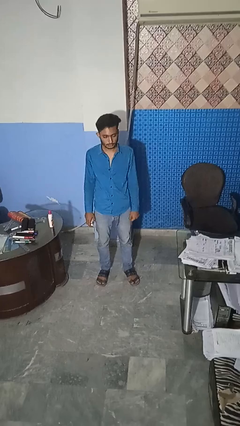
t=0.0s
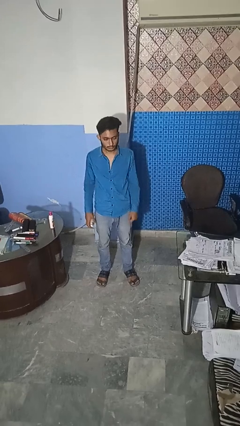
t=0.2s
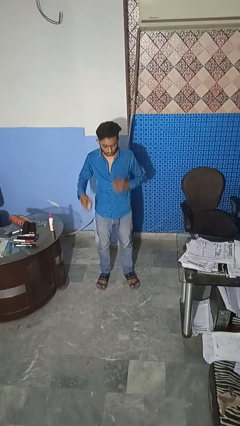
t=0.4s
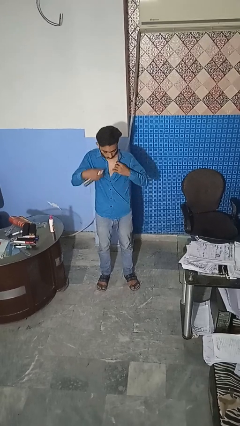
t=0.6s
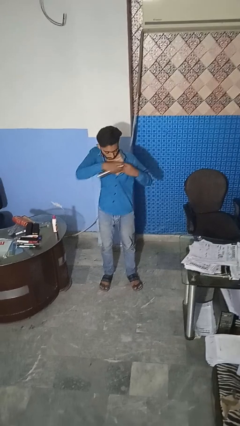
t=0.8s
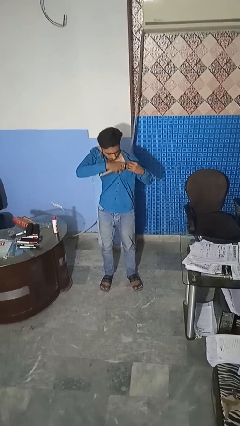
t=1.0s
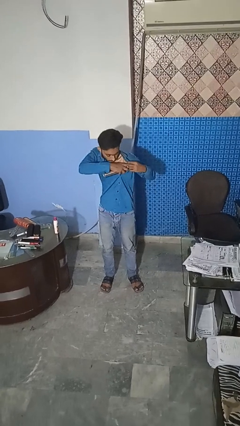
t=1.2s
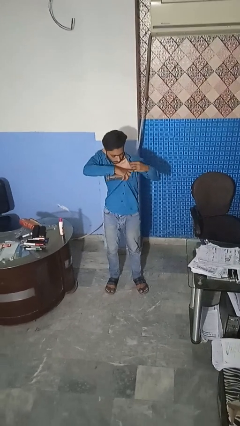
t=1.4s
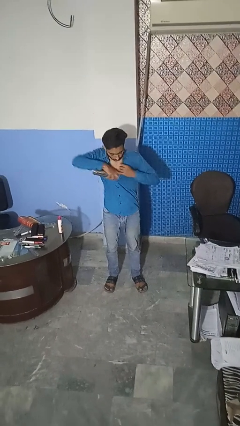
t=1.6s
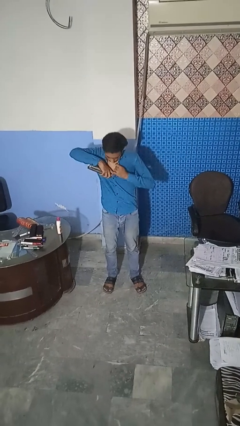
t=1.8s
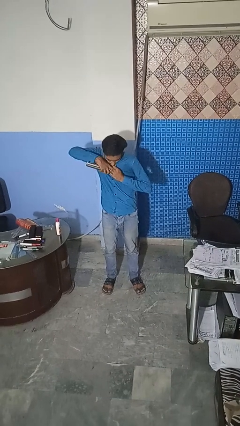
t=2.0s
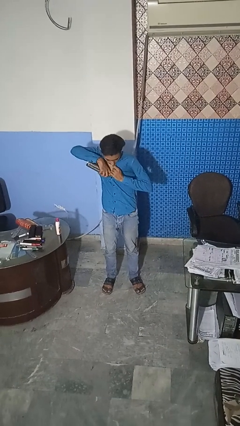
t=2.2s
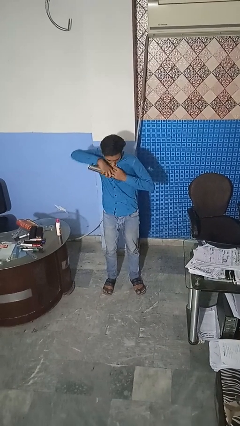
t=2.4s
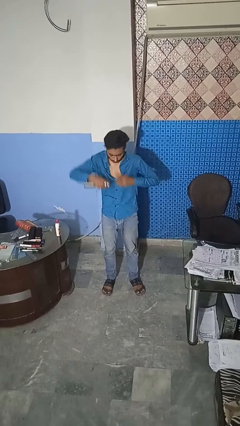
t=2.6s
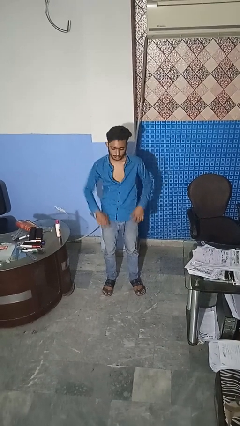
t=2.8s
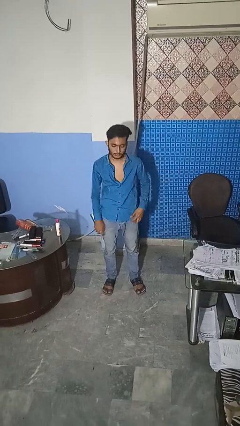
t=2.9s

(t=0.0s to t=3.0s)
person applies deodorant

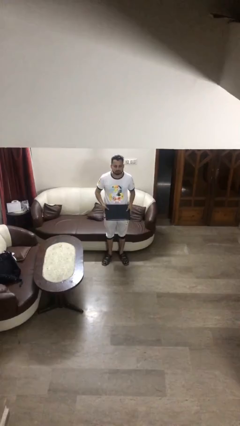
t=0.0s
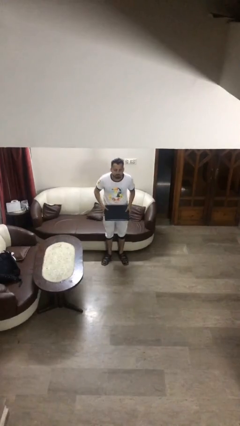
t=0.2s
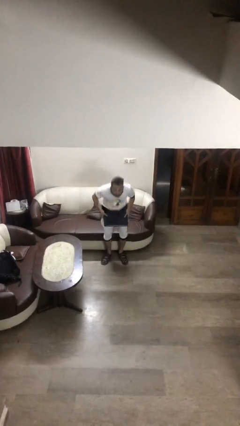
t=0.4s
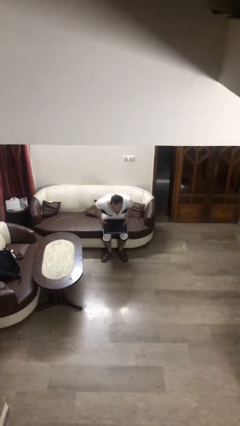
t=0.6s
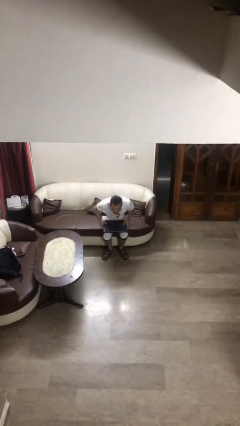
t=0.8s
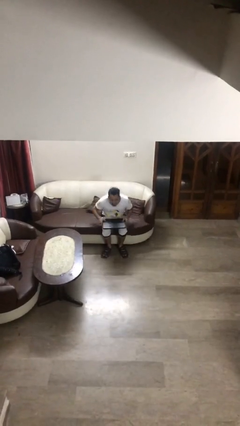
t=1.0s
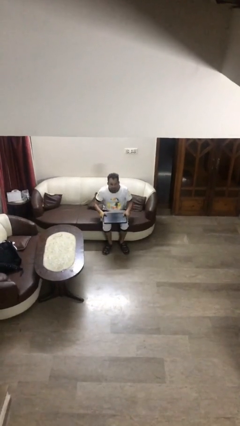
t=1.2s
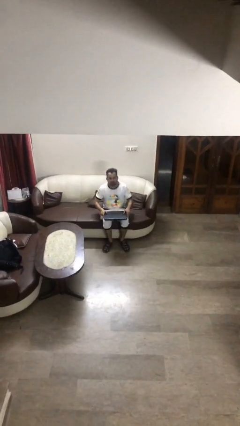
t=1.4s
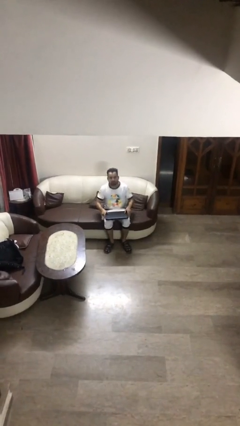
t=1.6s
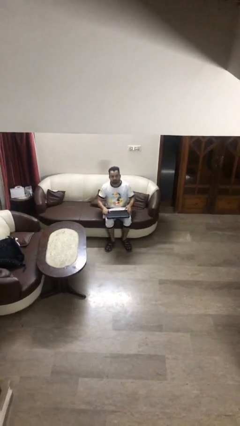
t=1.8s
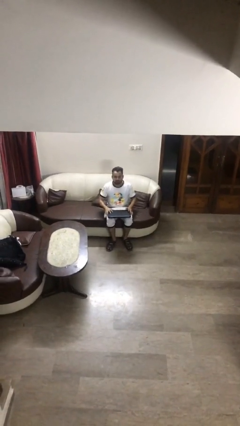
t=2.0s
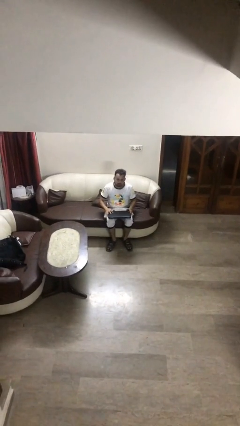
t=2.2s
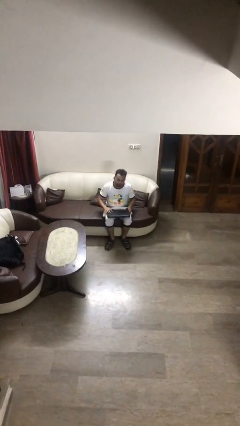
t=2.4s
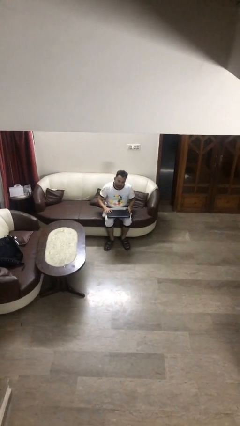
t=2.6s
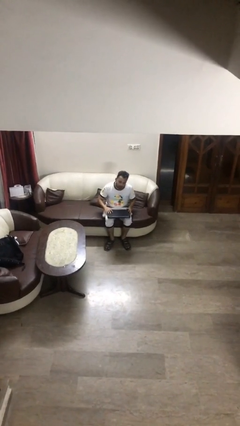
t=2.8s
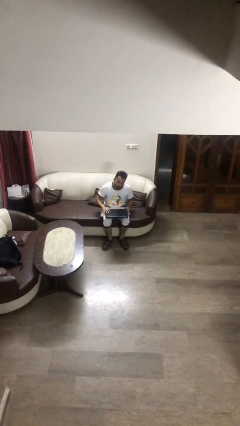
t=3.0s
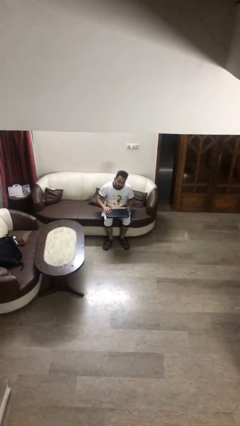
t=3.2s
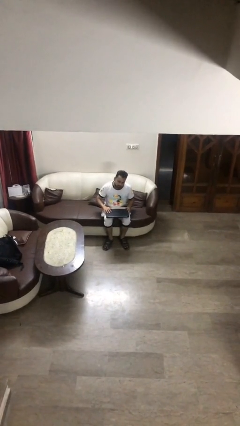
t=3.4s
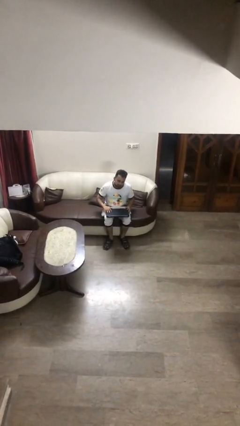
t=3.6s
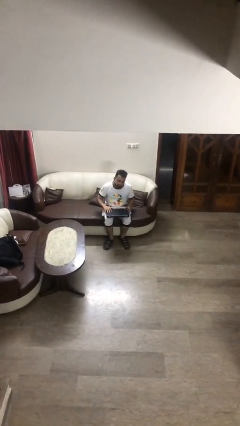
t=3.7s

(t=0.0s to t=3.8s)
person sits down

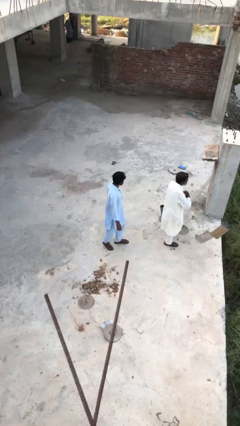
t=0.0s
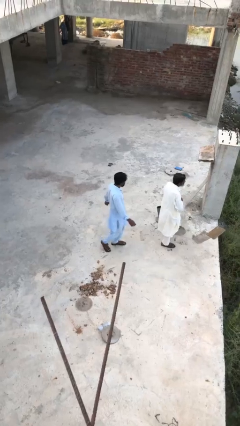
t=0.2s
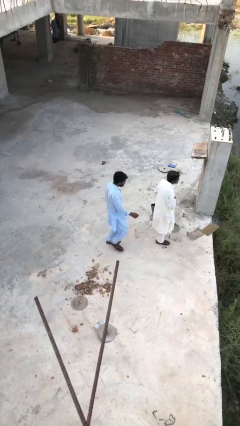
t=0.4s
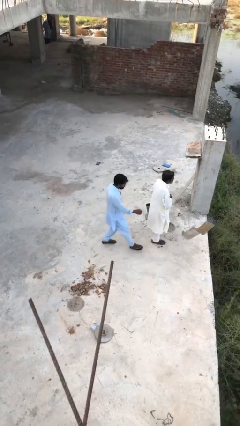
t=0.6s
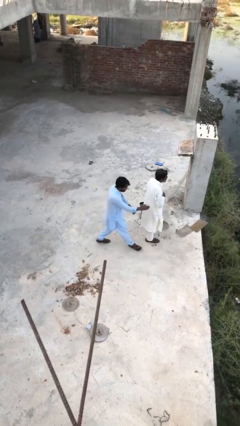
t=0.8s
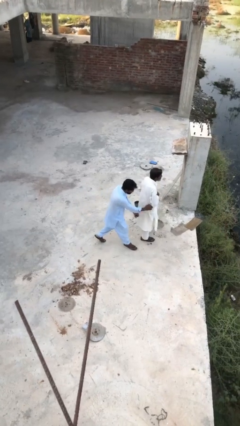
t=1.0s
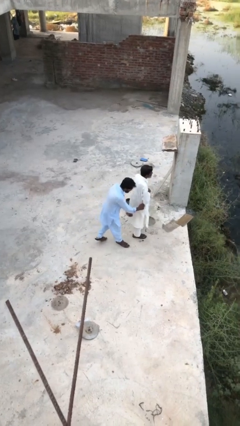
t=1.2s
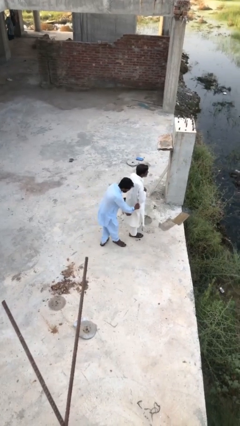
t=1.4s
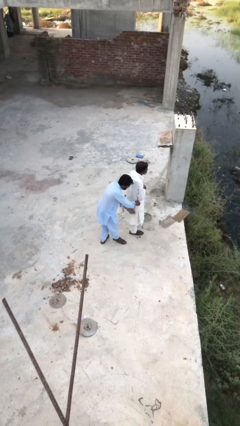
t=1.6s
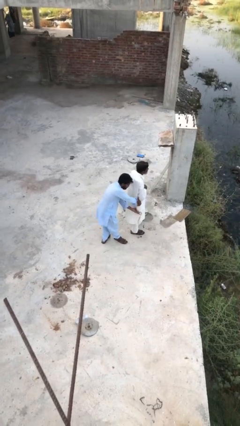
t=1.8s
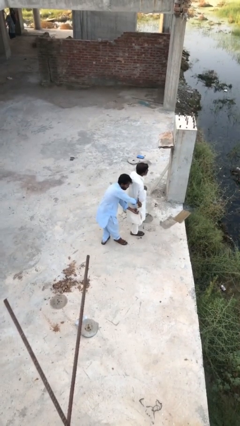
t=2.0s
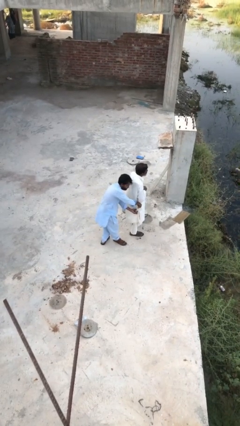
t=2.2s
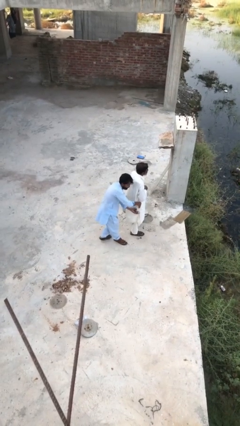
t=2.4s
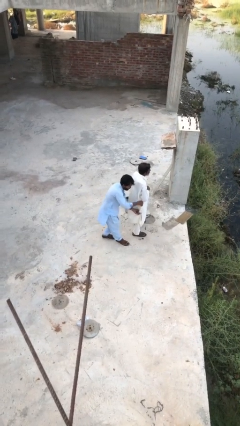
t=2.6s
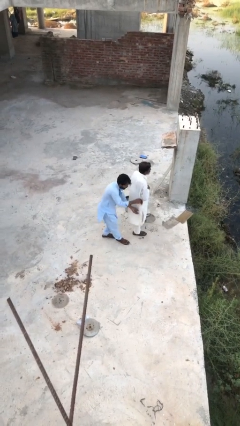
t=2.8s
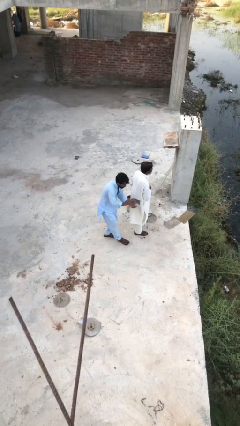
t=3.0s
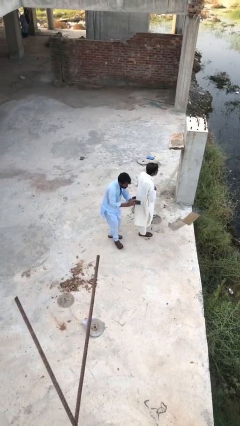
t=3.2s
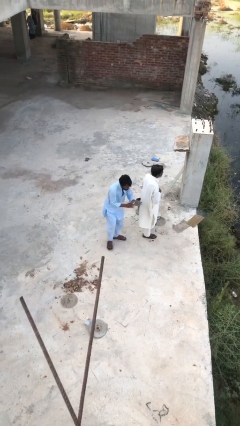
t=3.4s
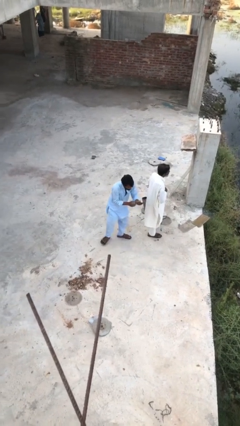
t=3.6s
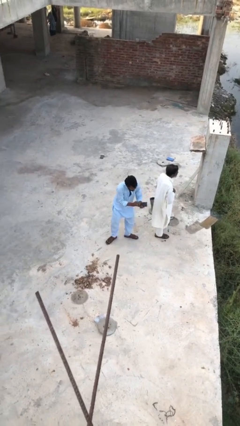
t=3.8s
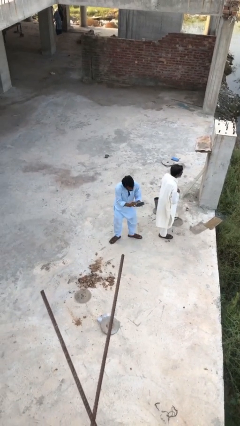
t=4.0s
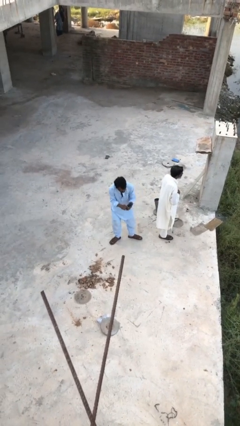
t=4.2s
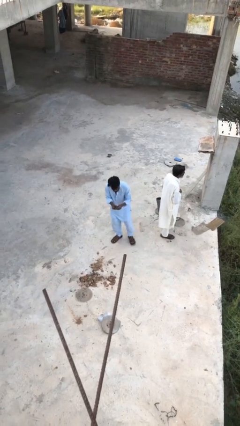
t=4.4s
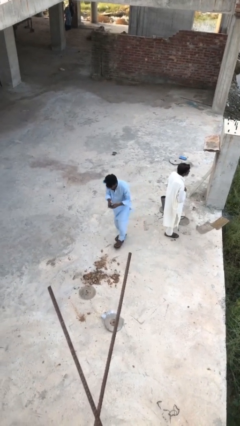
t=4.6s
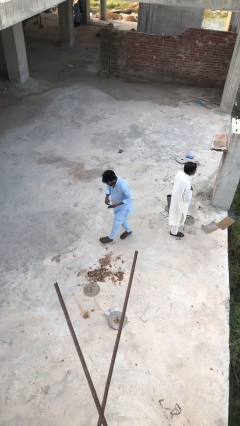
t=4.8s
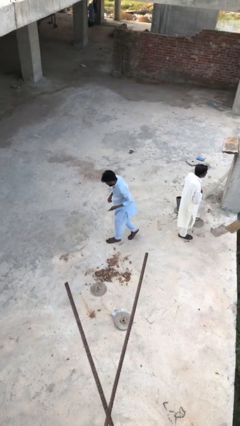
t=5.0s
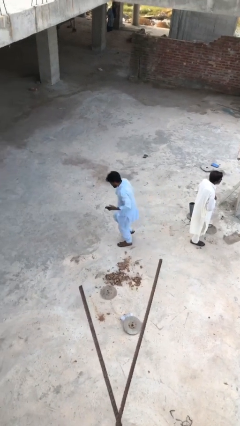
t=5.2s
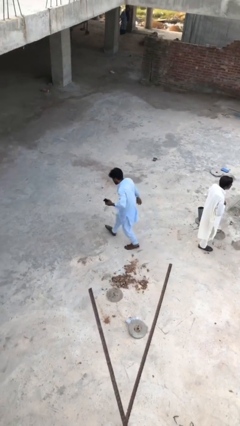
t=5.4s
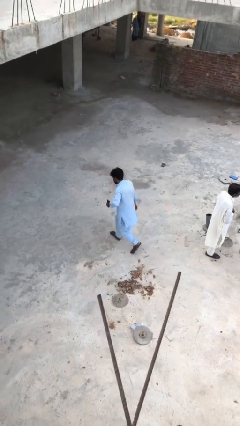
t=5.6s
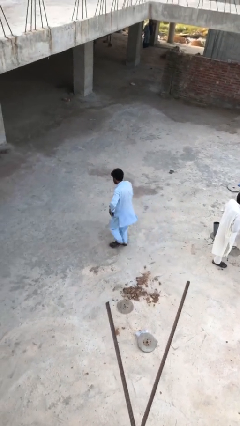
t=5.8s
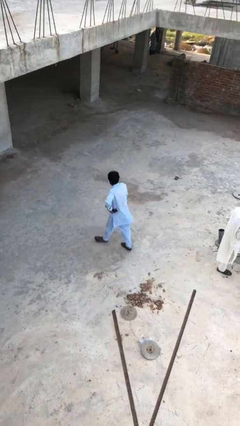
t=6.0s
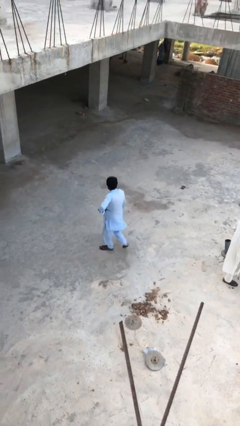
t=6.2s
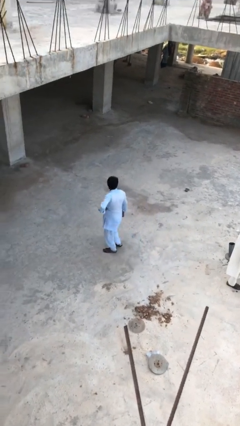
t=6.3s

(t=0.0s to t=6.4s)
person steals object from person

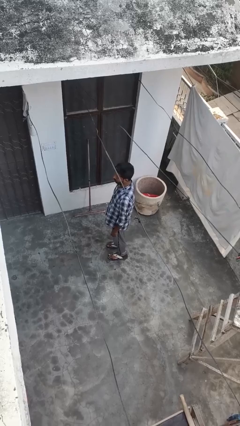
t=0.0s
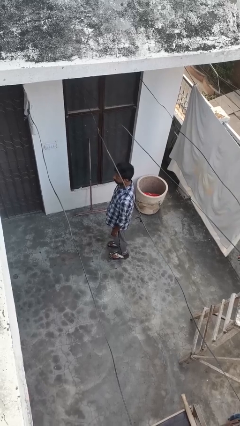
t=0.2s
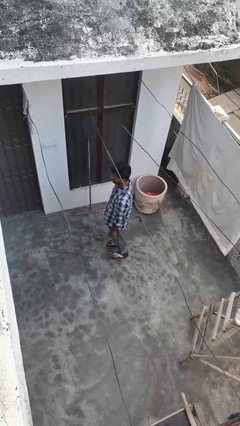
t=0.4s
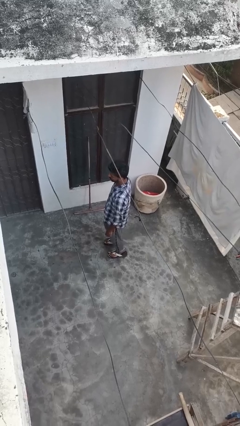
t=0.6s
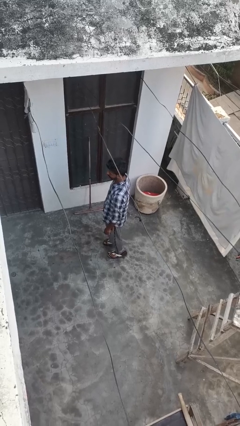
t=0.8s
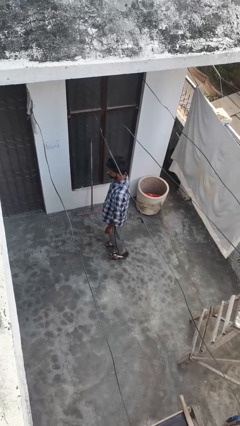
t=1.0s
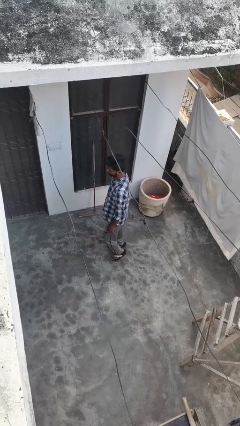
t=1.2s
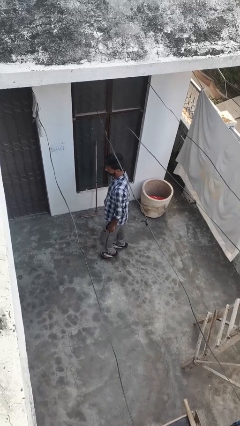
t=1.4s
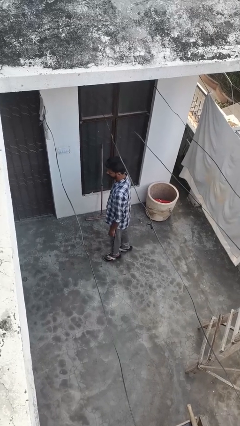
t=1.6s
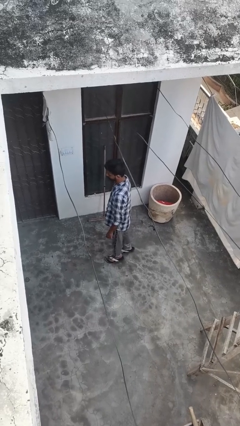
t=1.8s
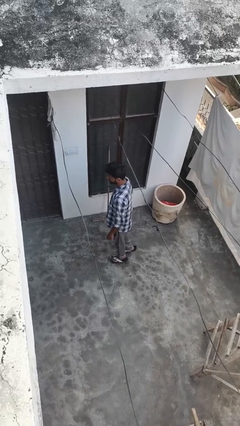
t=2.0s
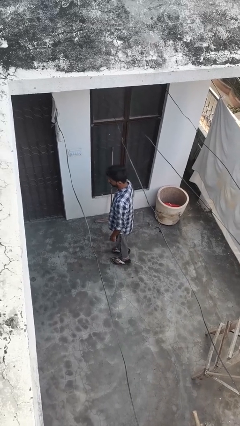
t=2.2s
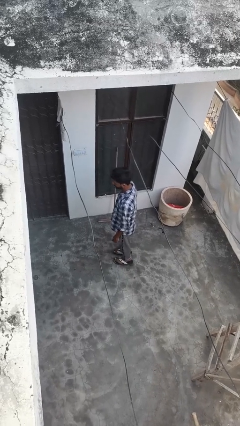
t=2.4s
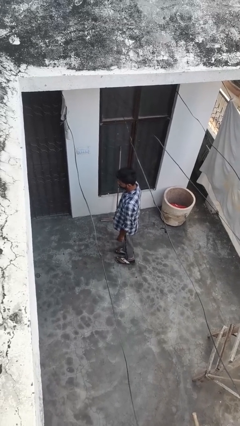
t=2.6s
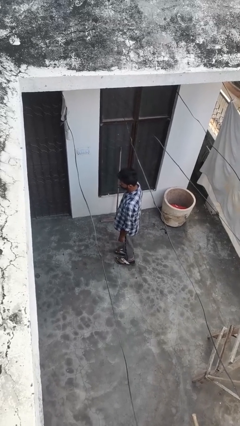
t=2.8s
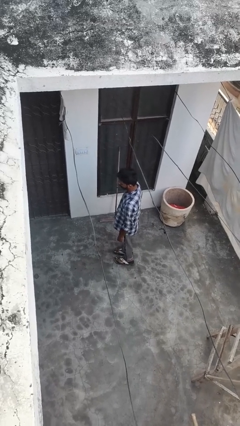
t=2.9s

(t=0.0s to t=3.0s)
person walks tiptoe

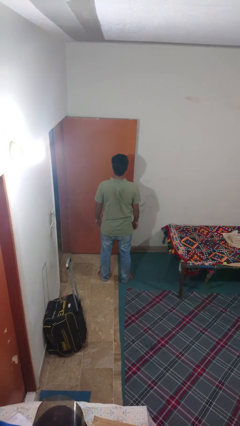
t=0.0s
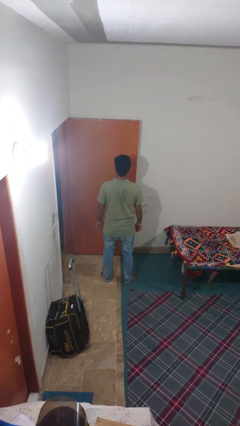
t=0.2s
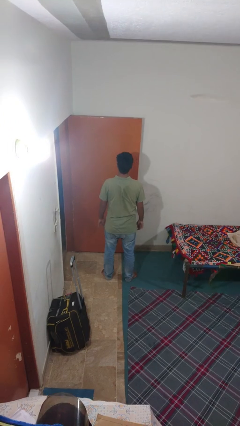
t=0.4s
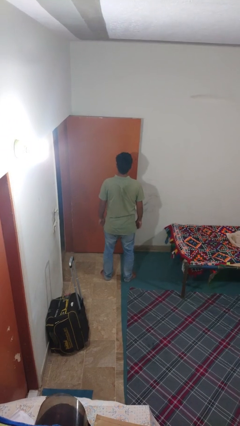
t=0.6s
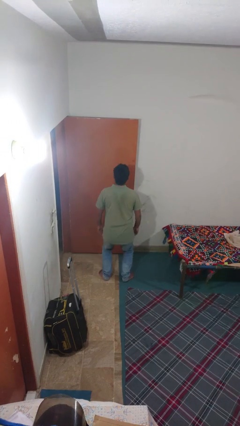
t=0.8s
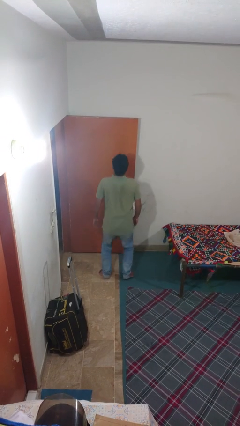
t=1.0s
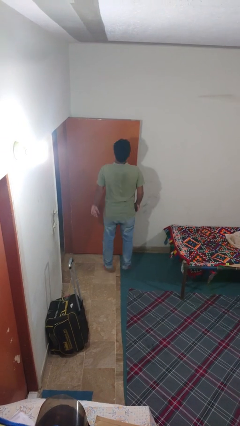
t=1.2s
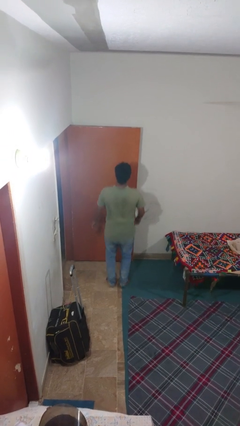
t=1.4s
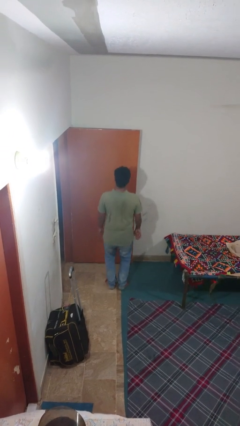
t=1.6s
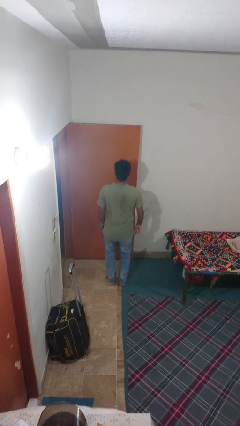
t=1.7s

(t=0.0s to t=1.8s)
person jumps
